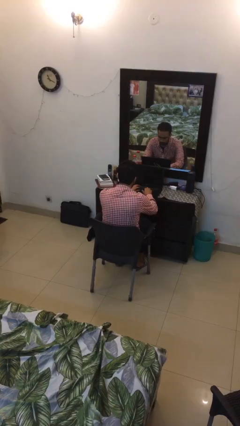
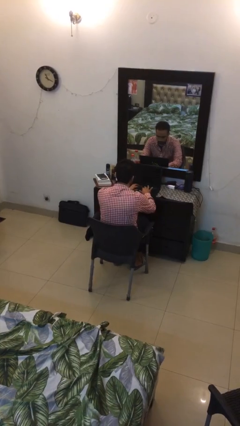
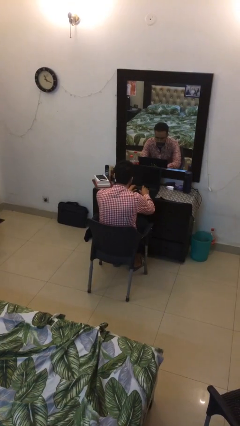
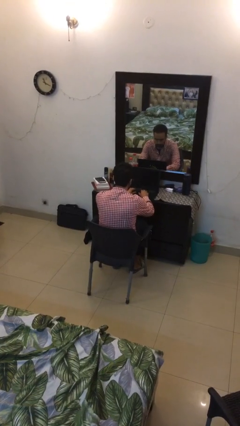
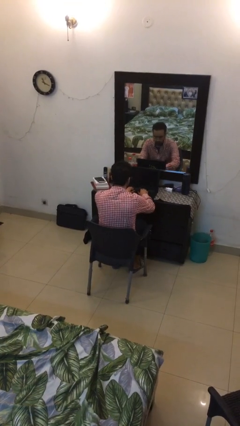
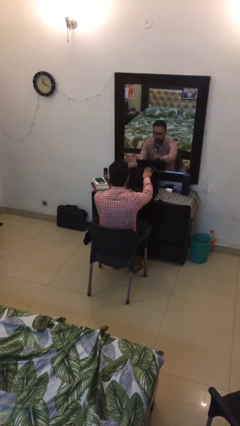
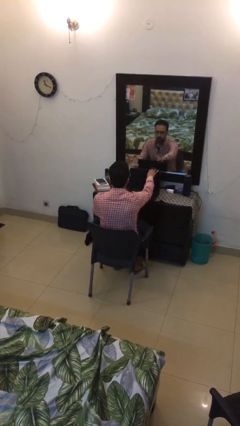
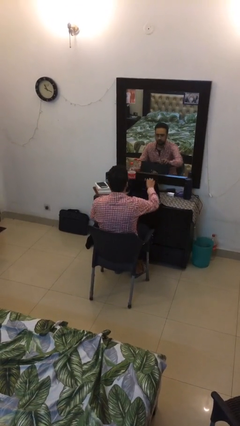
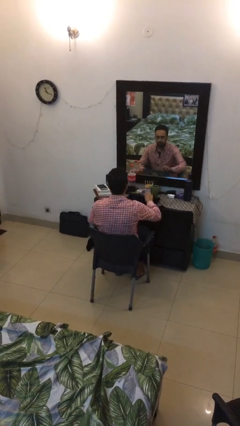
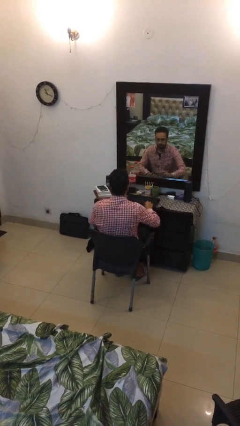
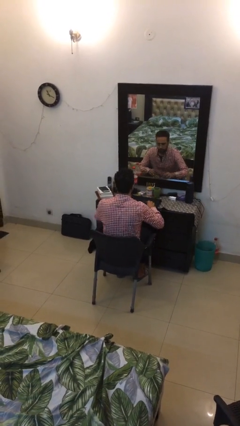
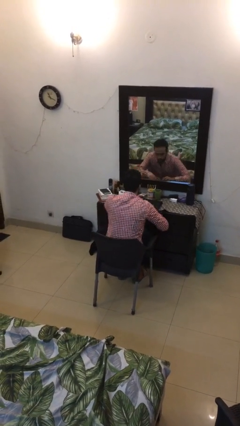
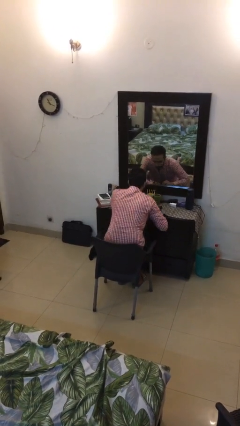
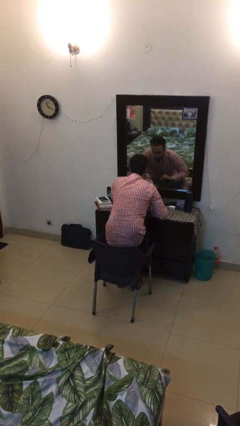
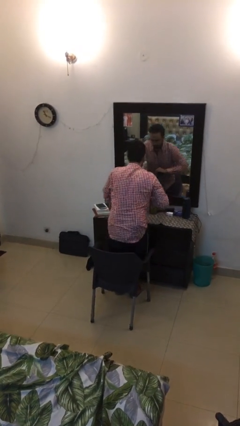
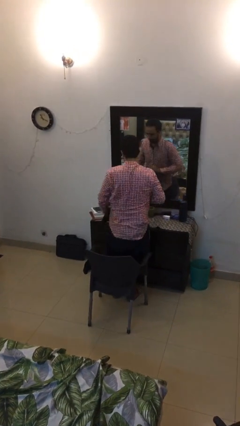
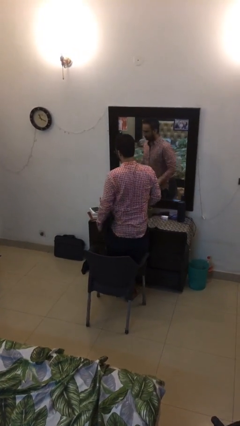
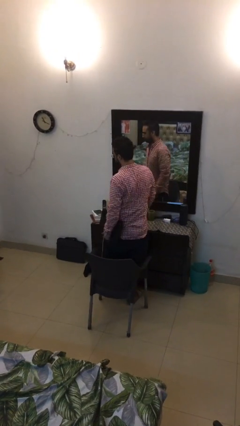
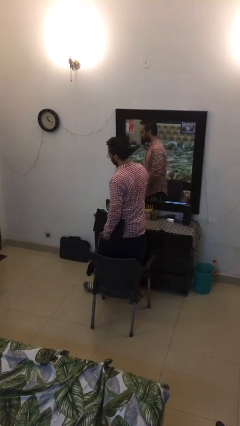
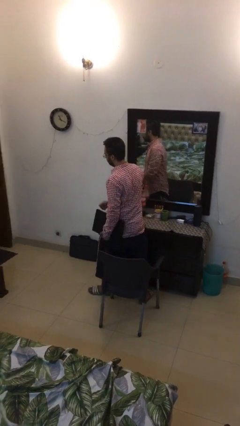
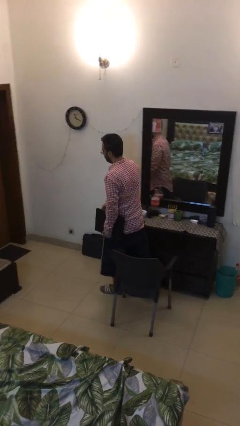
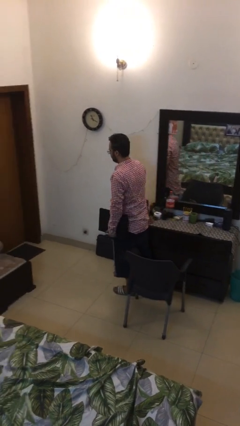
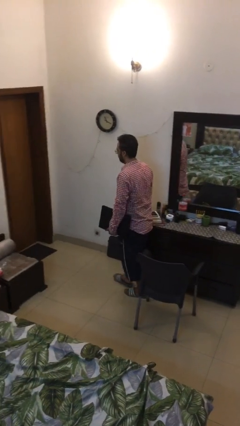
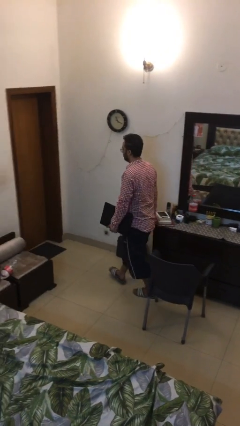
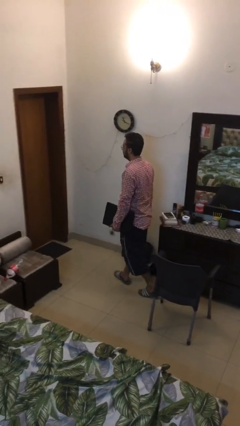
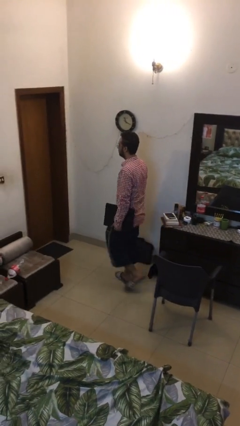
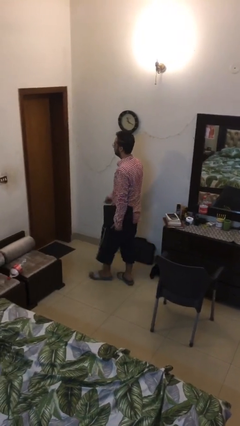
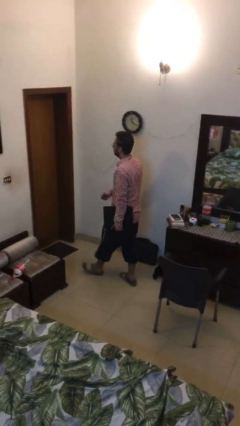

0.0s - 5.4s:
person stands up

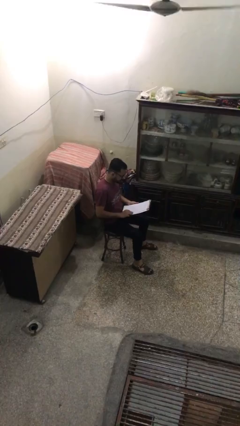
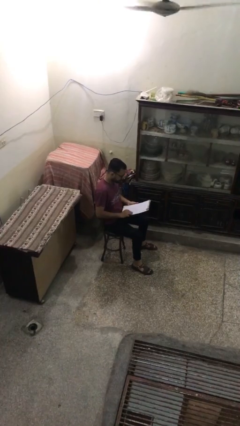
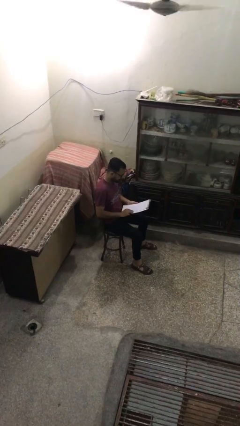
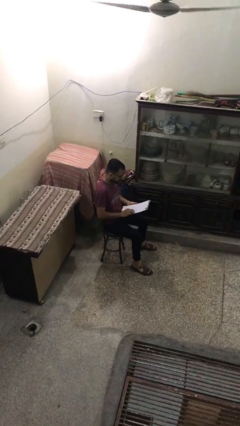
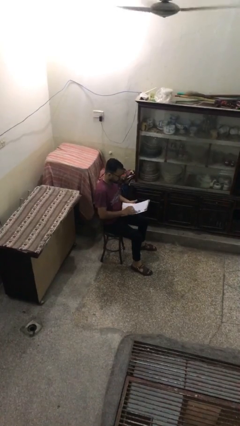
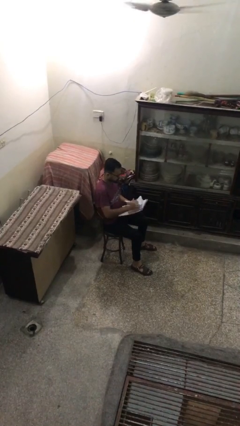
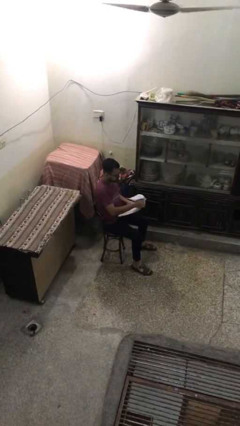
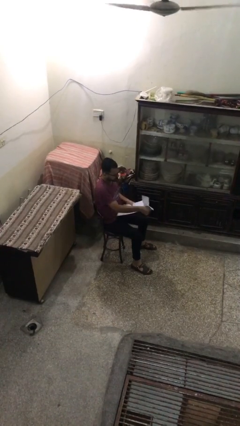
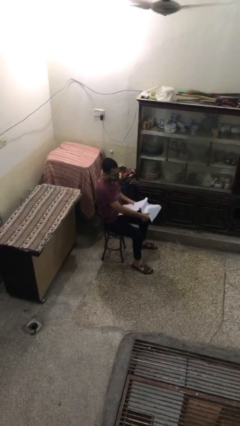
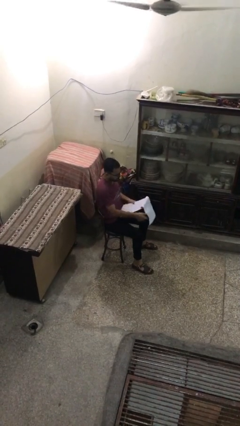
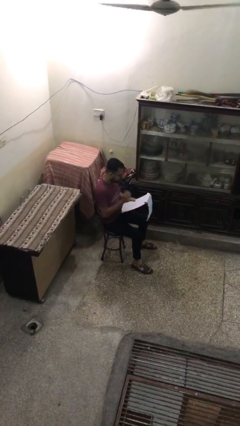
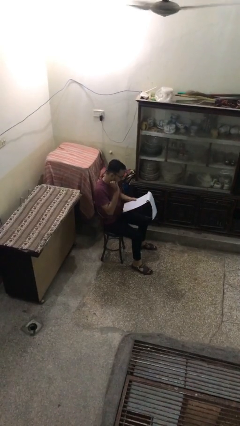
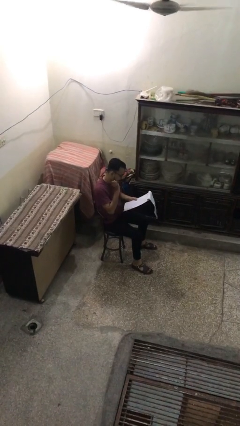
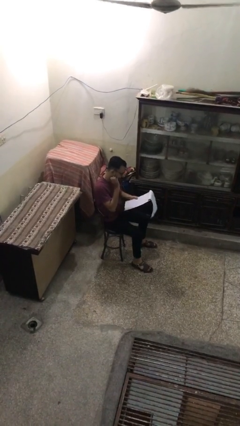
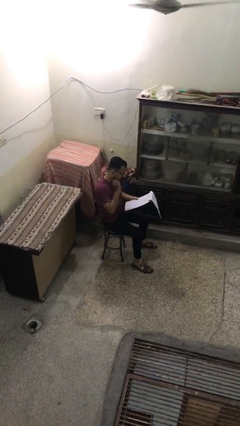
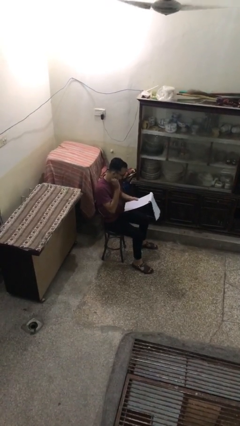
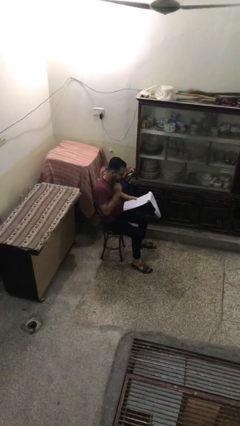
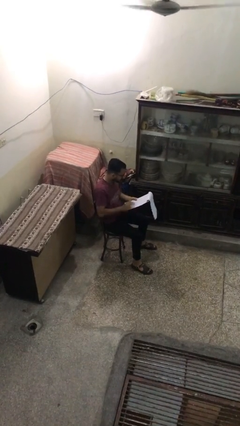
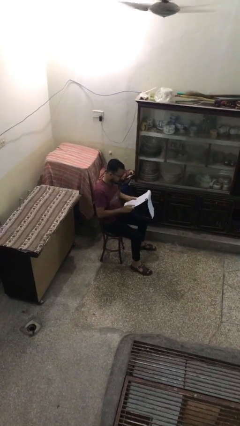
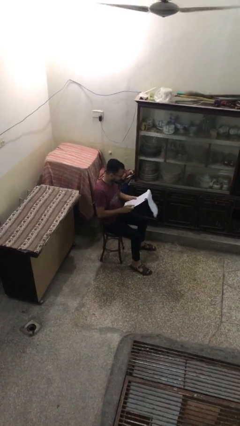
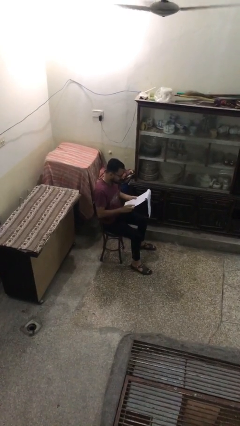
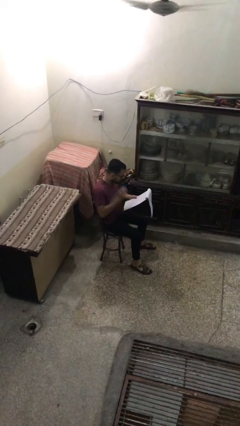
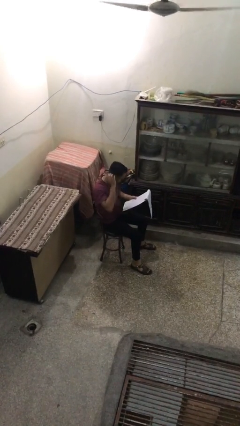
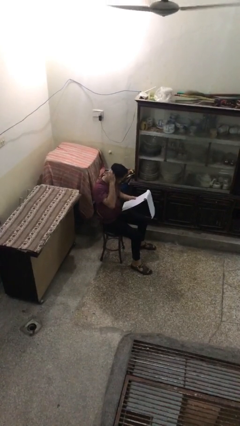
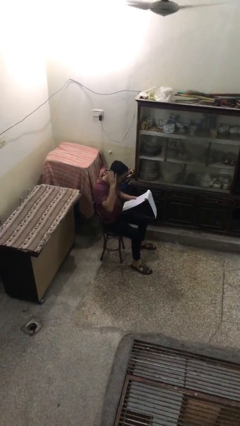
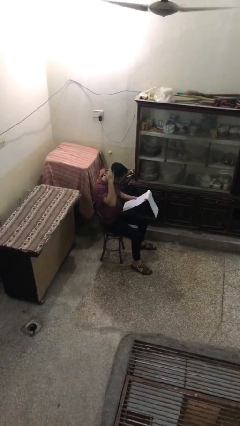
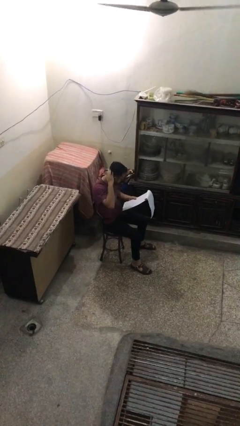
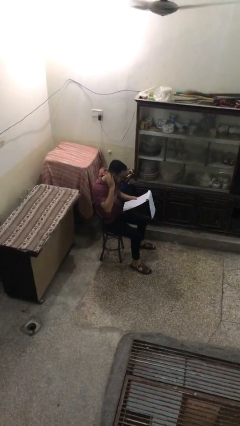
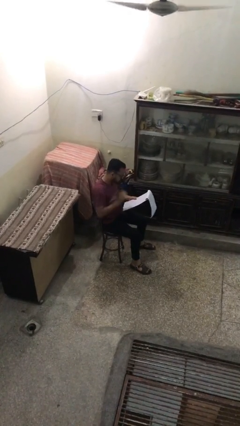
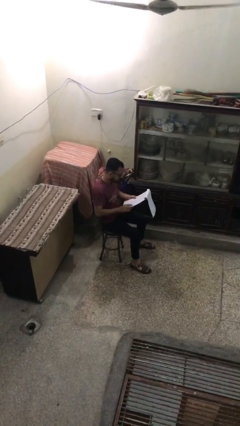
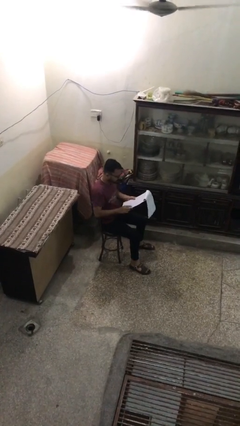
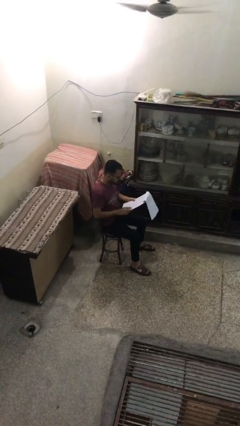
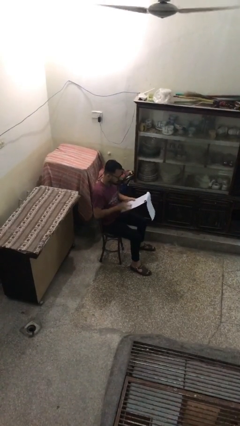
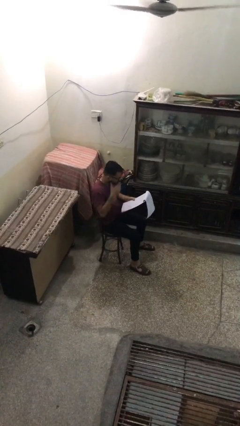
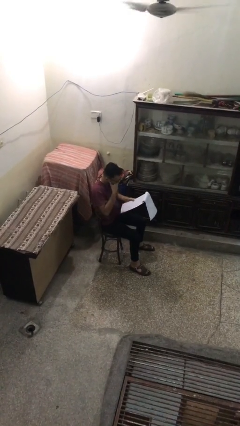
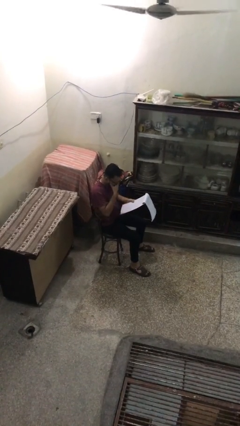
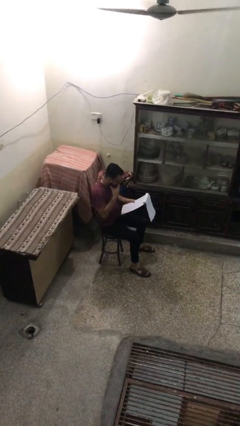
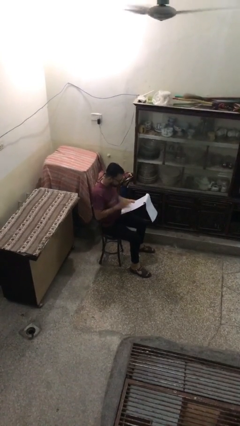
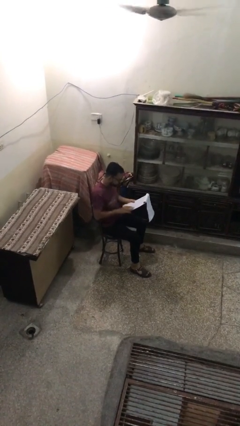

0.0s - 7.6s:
person reads document

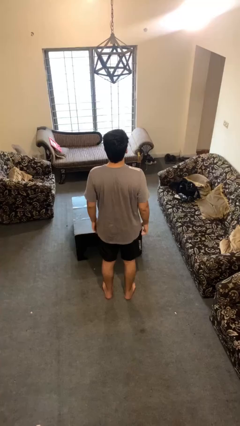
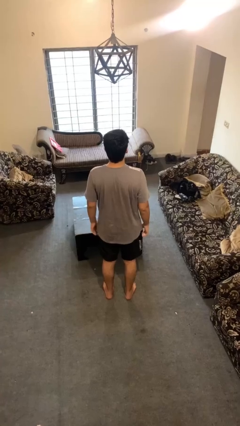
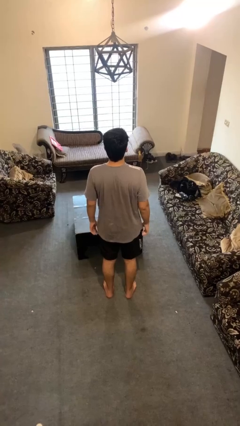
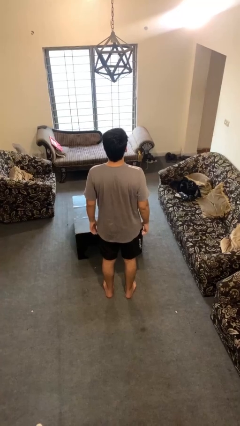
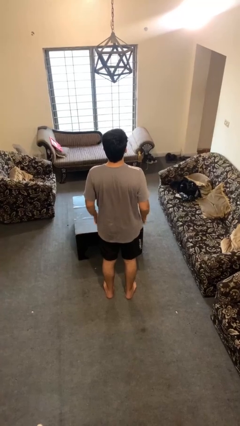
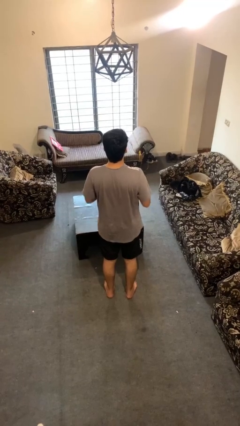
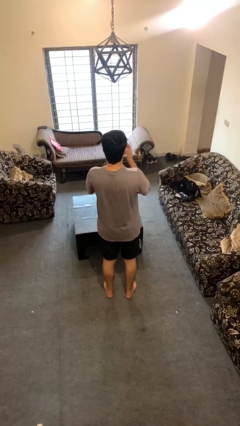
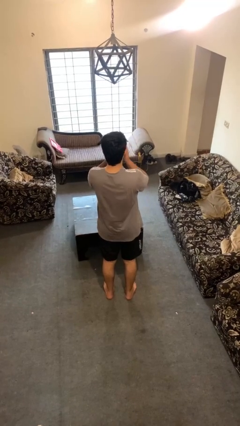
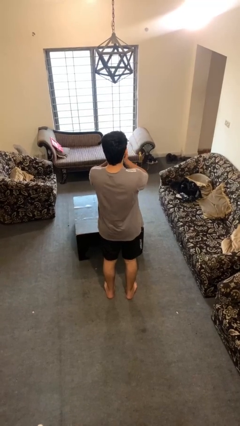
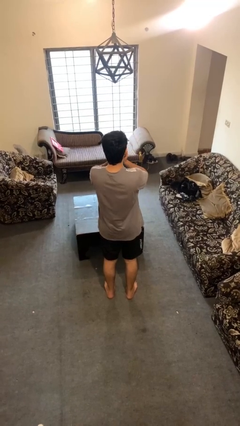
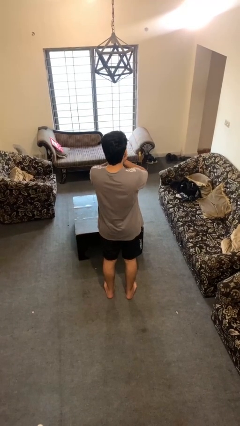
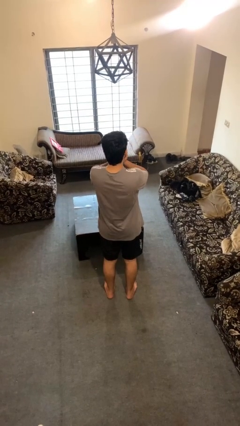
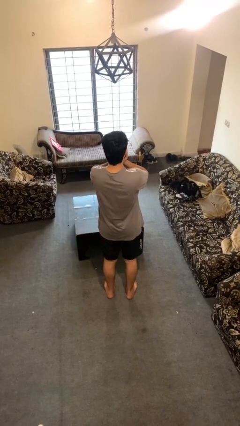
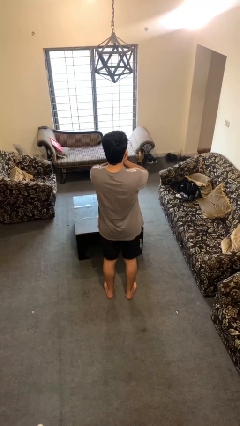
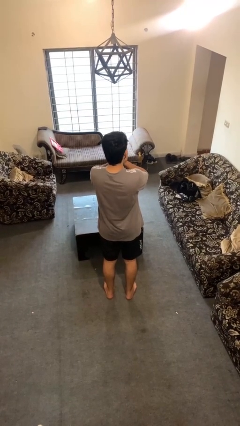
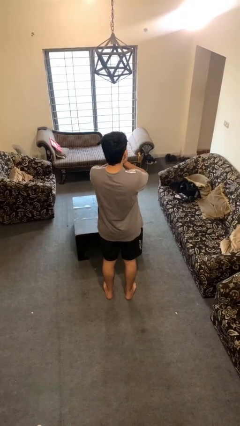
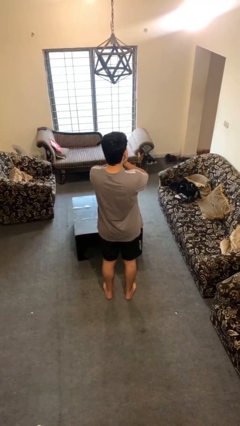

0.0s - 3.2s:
person covers face with hands

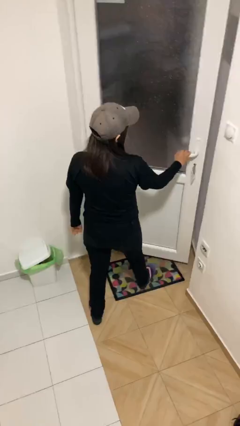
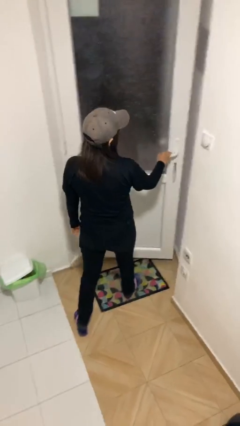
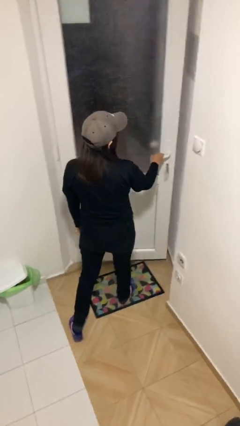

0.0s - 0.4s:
person closes facility door

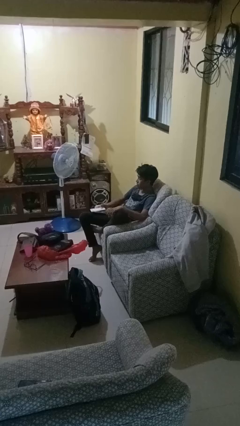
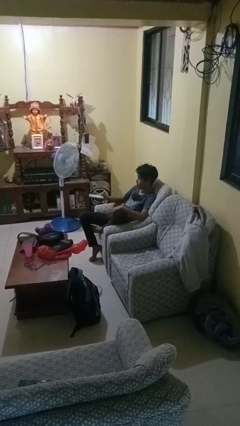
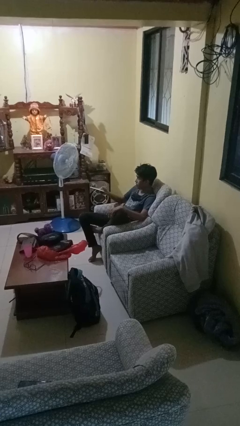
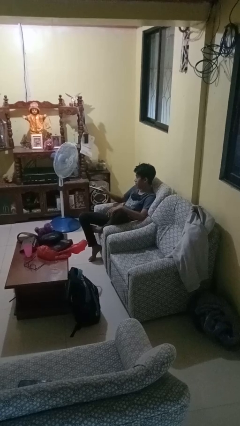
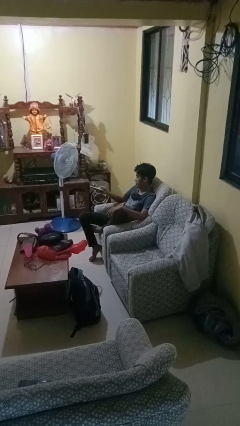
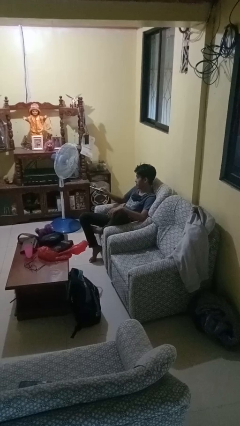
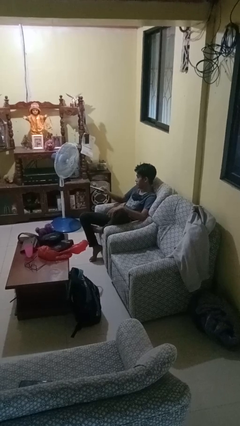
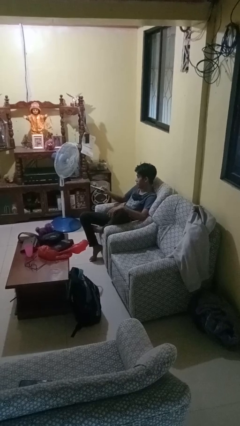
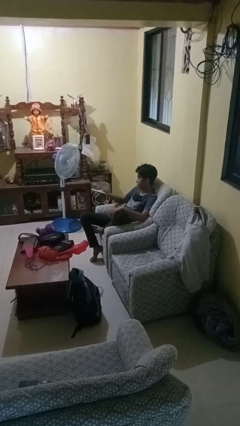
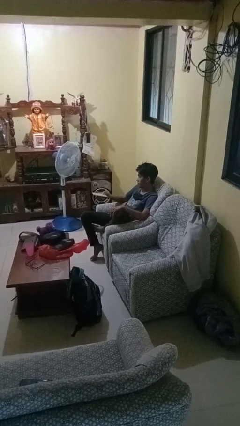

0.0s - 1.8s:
person uses television remote
